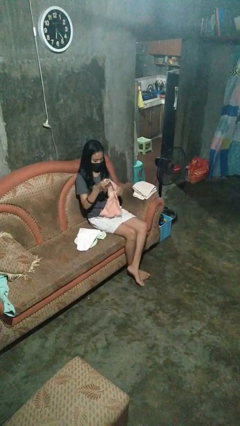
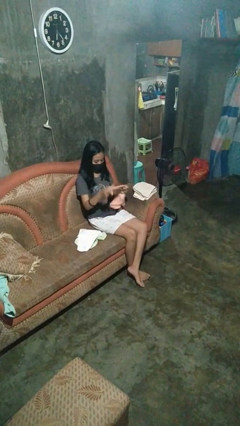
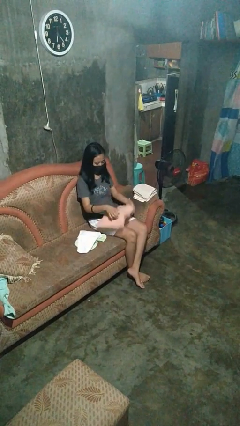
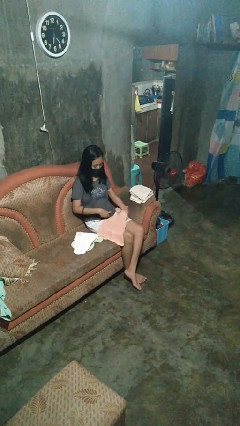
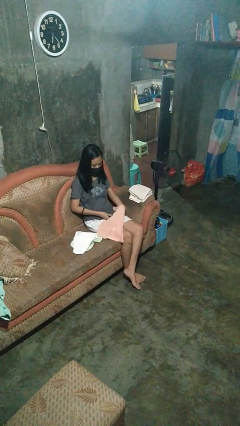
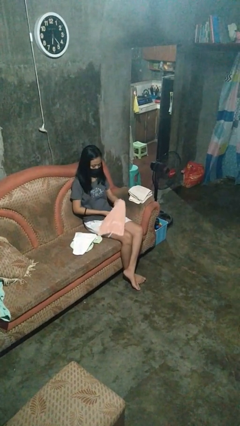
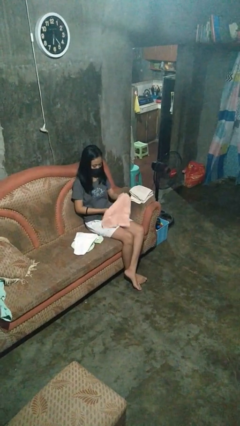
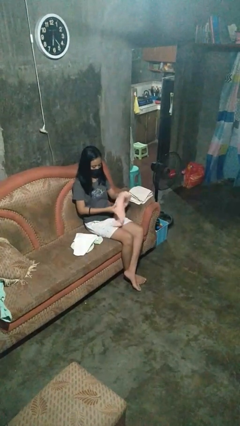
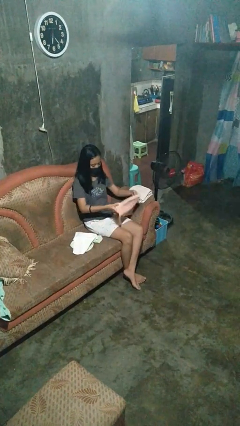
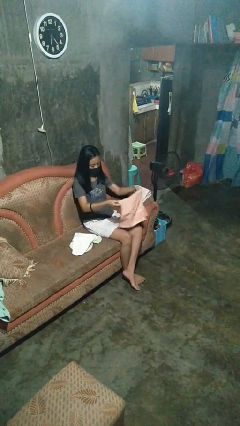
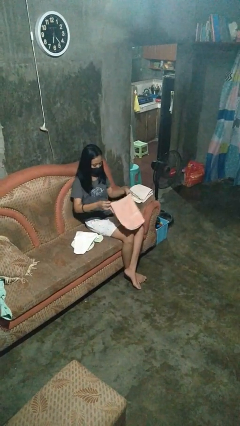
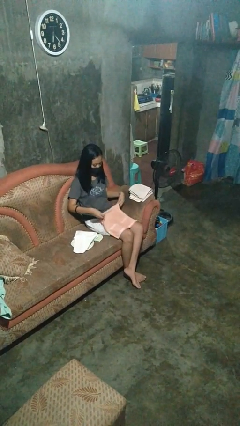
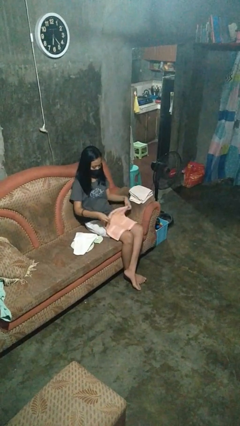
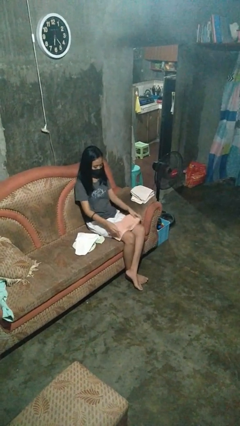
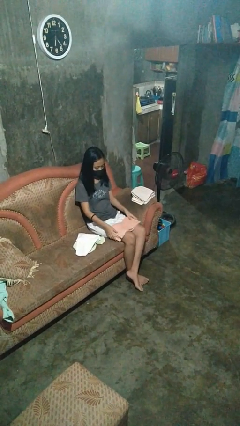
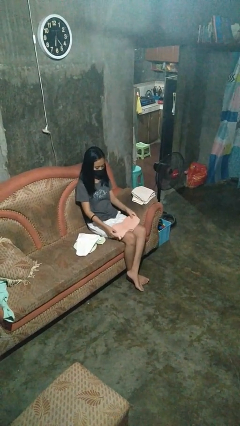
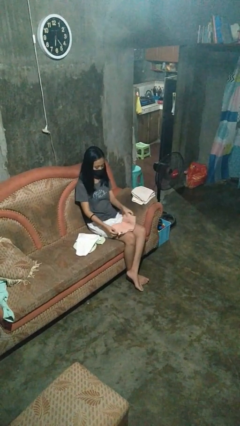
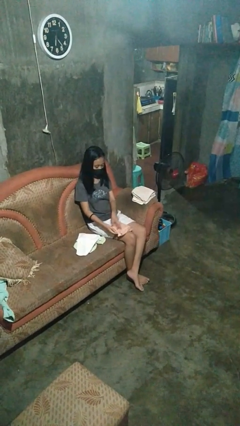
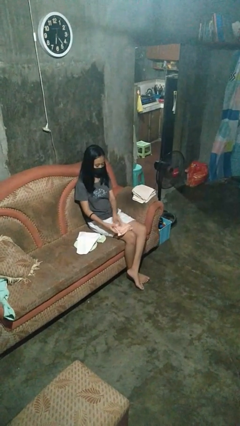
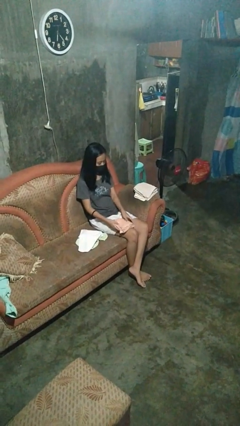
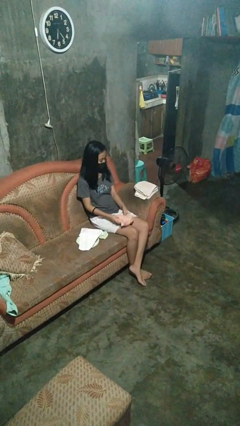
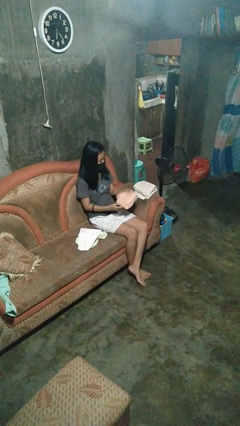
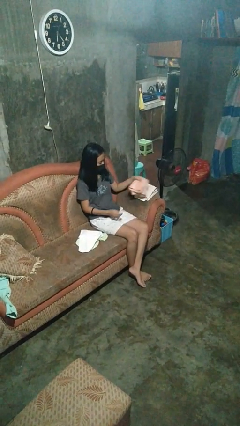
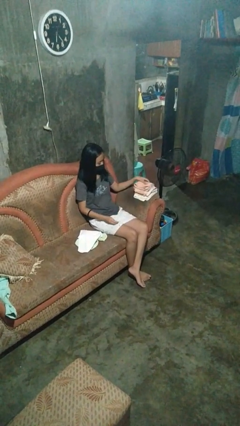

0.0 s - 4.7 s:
person folds towel

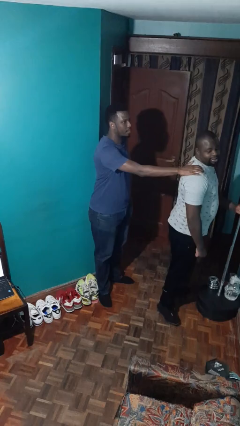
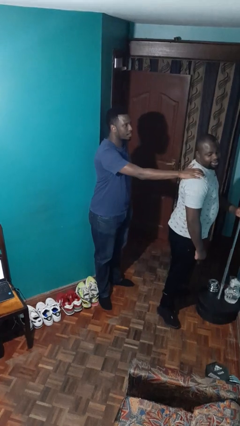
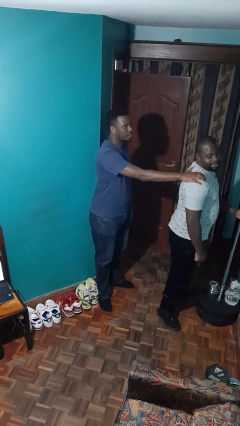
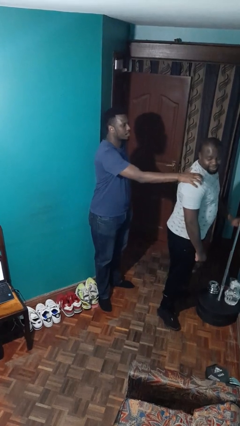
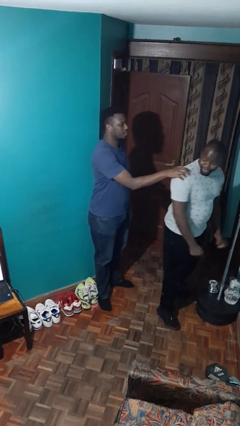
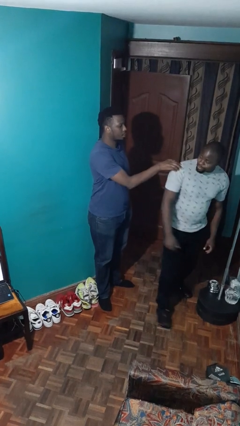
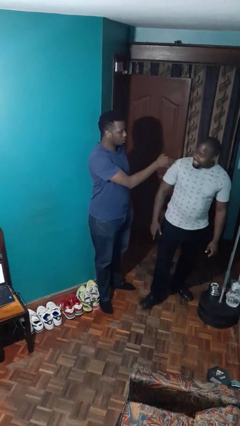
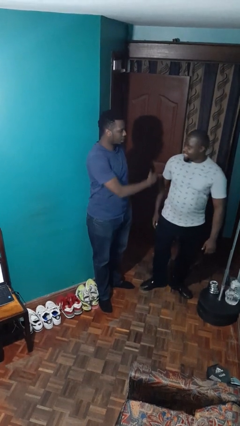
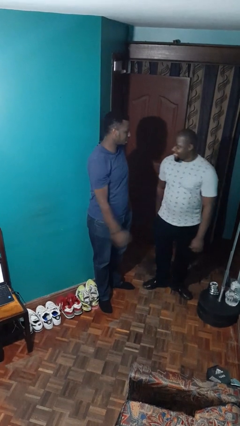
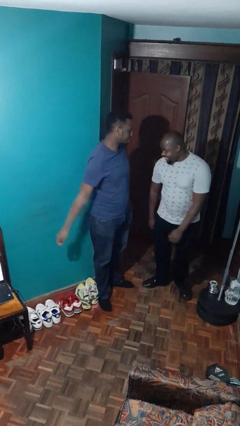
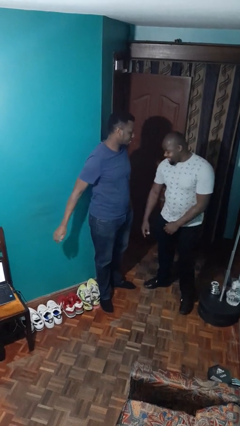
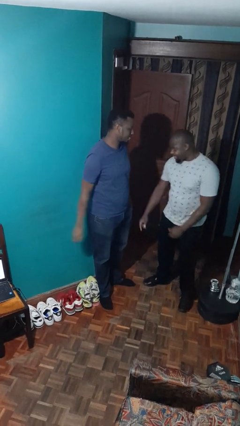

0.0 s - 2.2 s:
person spins person around

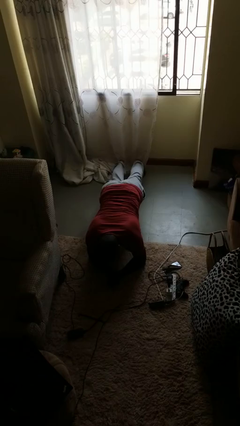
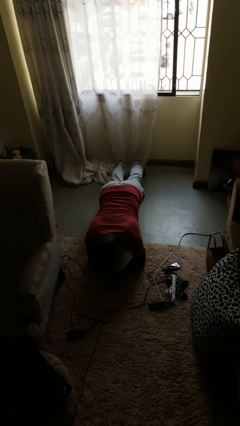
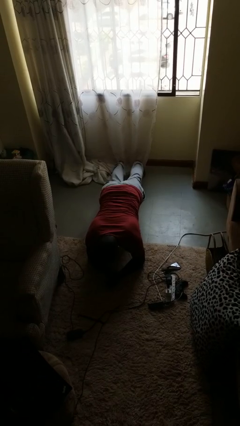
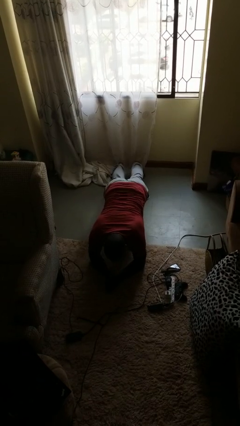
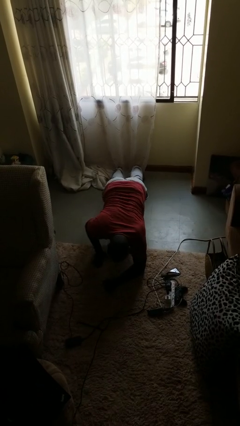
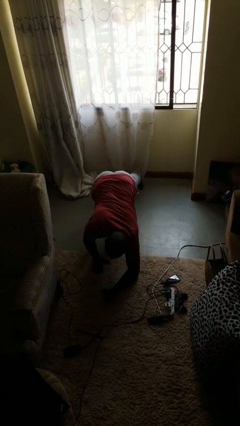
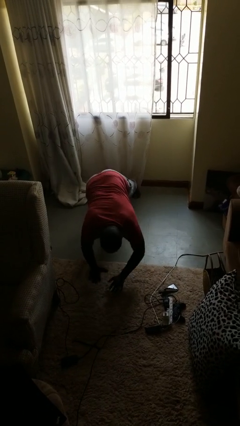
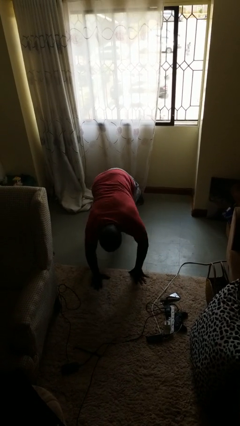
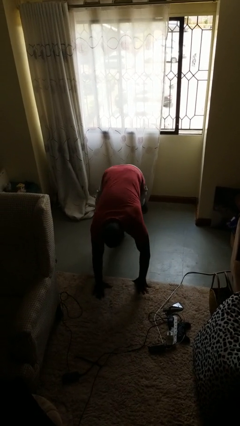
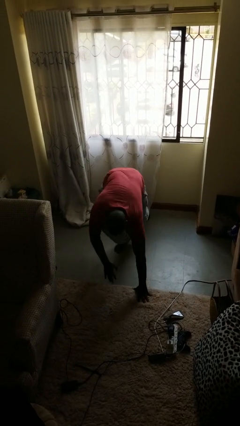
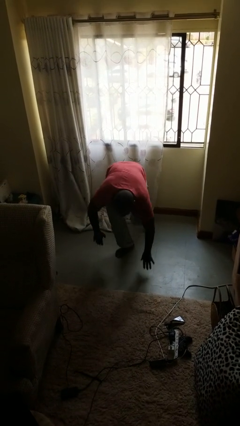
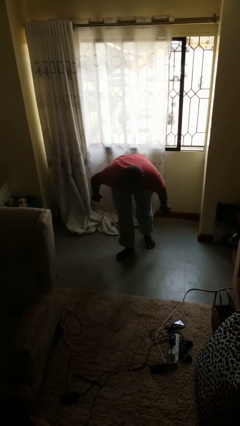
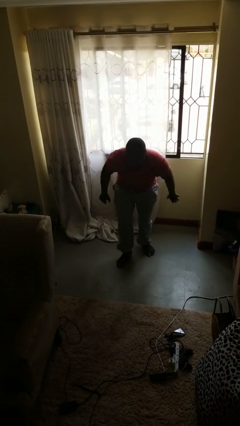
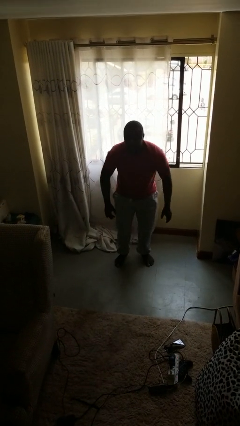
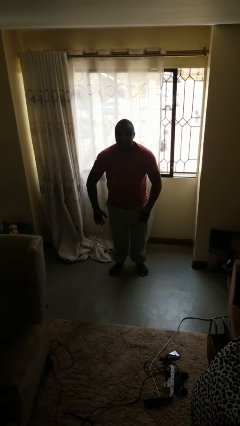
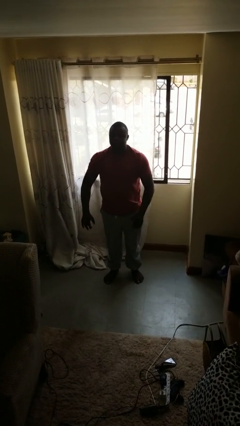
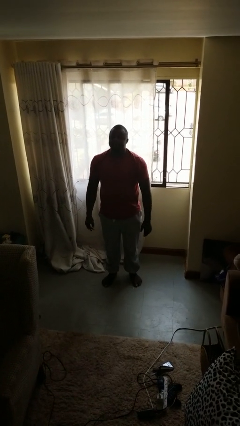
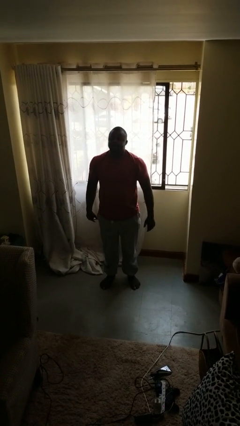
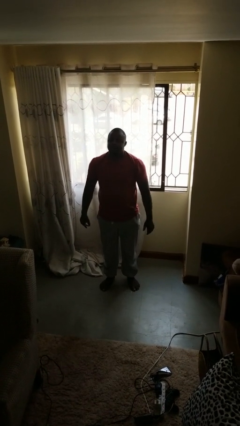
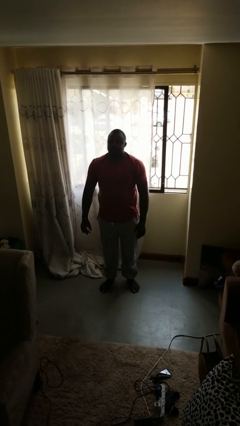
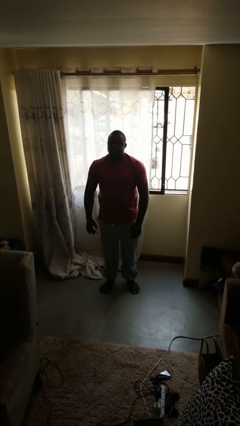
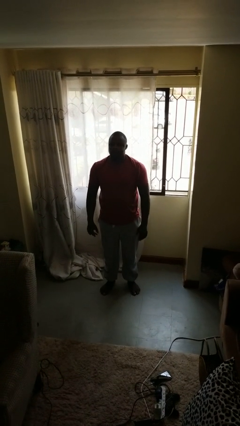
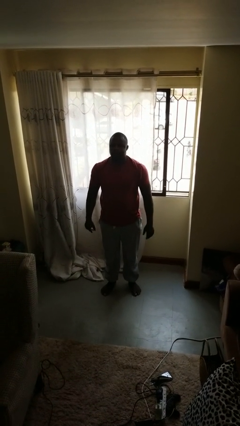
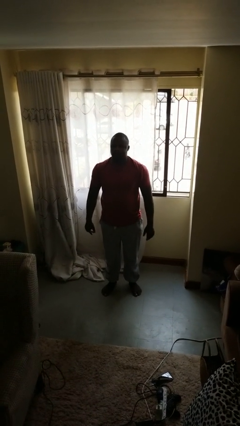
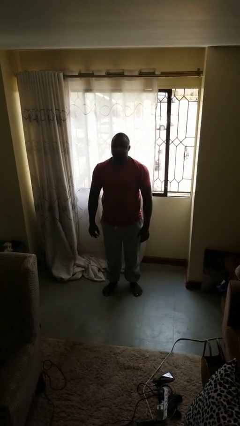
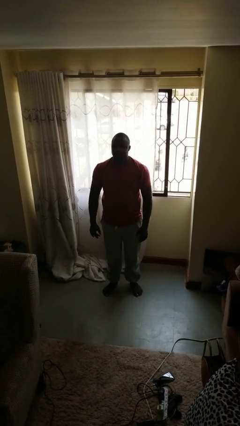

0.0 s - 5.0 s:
person stands up from floor

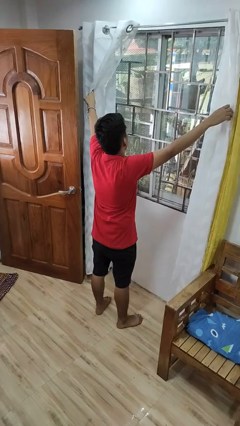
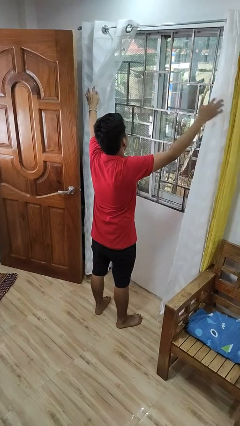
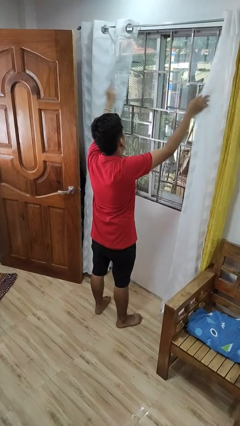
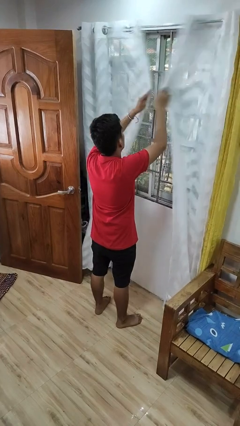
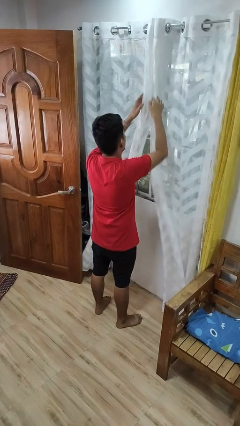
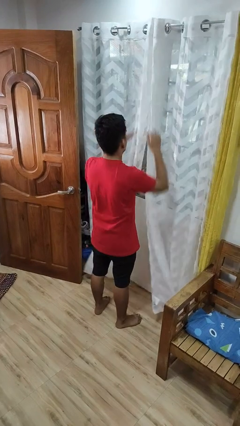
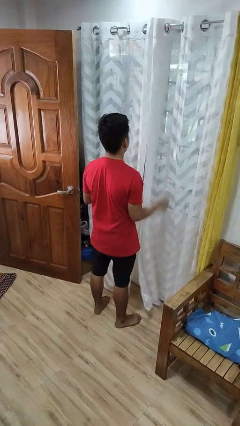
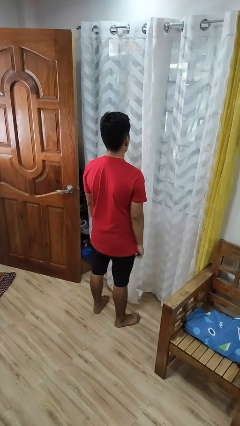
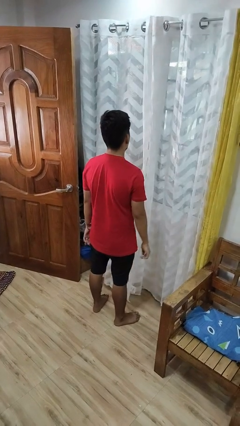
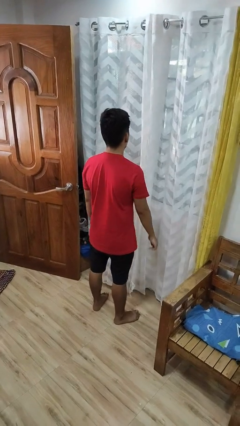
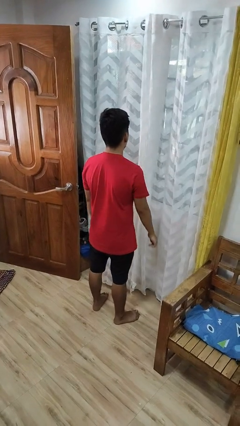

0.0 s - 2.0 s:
person closes curtains

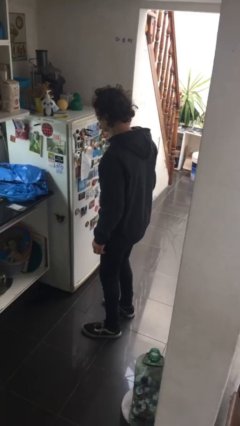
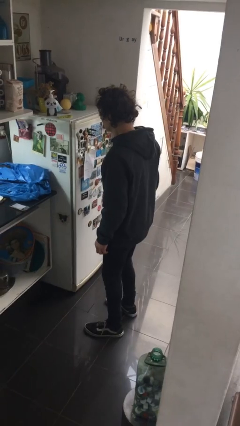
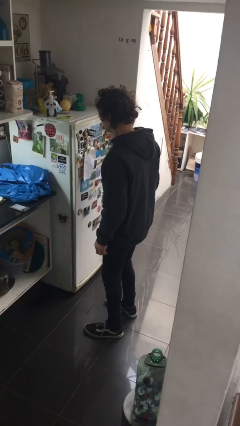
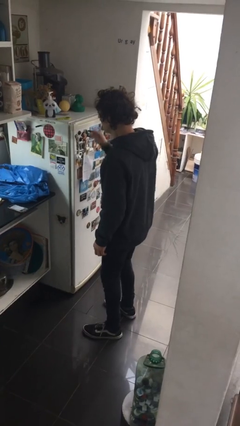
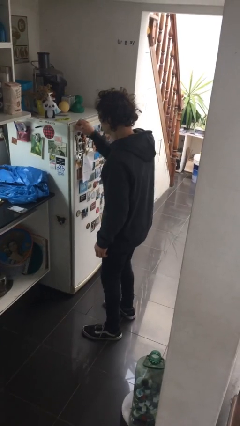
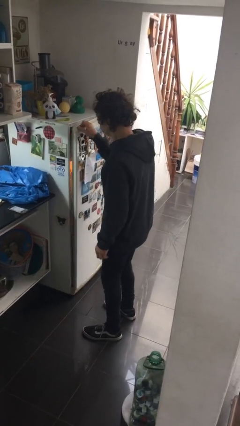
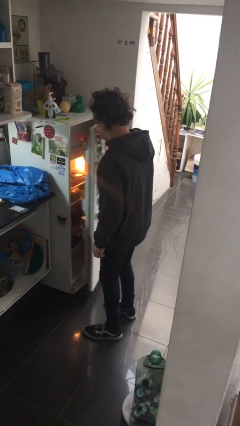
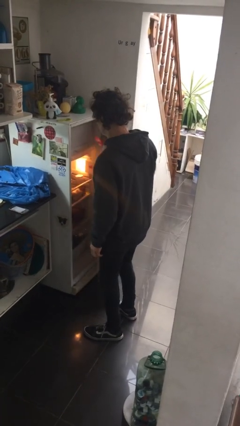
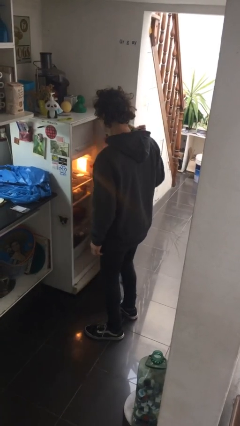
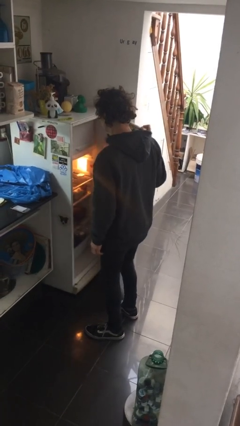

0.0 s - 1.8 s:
person opens refrigerator

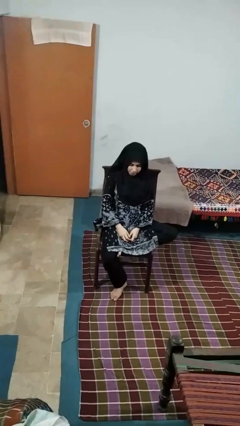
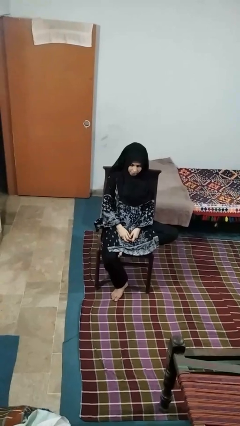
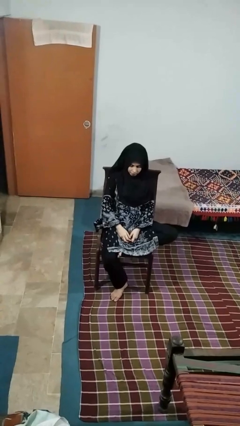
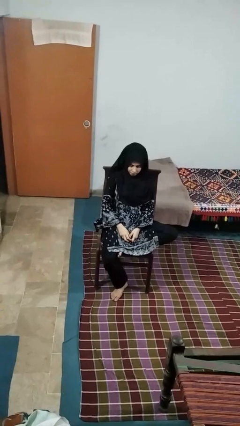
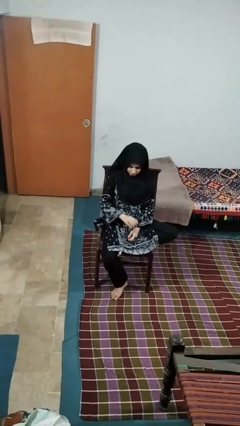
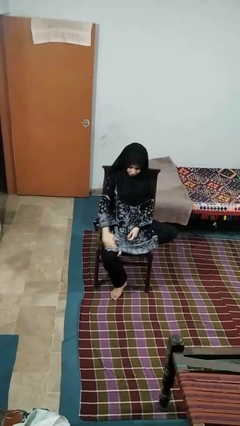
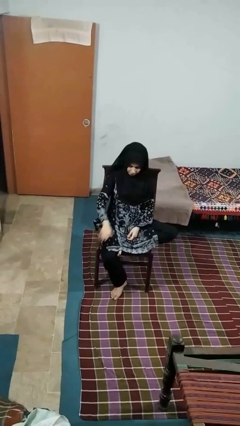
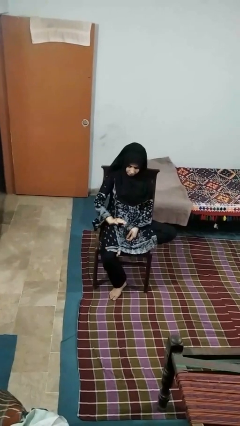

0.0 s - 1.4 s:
person swats bug
